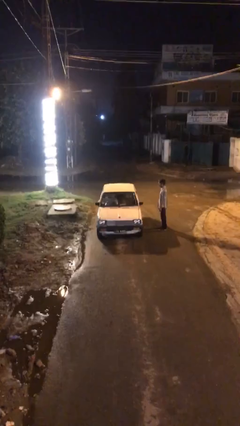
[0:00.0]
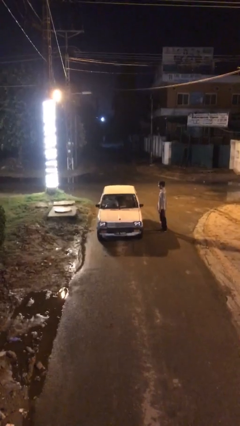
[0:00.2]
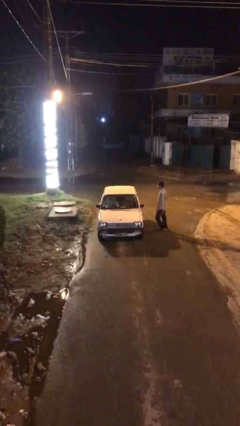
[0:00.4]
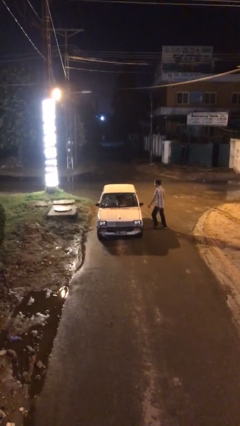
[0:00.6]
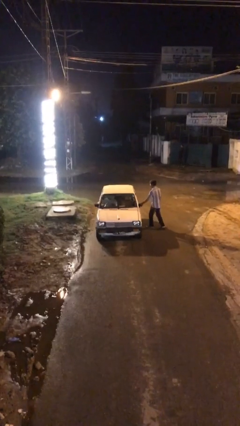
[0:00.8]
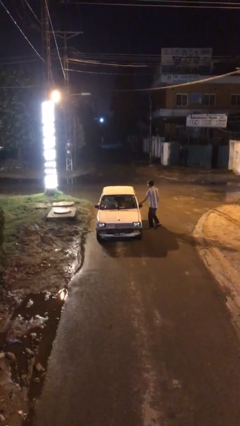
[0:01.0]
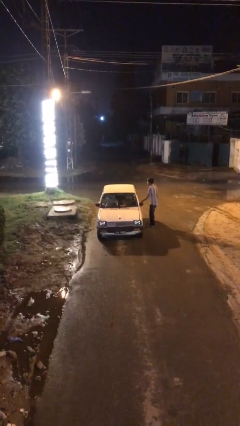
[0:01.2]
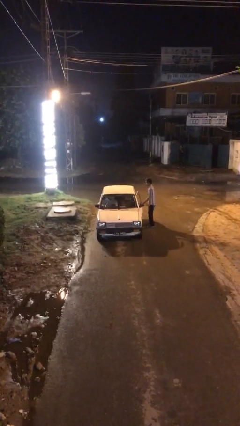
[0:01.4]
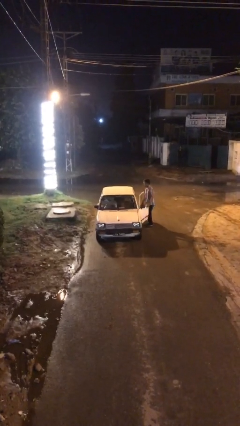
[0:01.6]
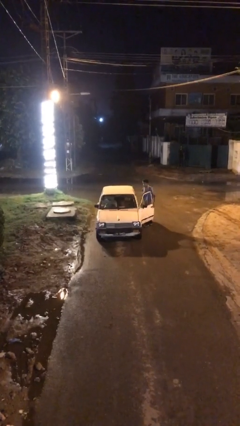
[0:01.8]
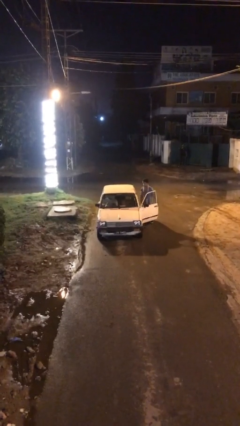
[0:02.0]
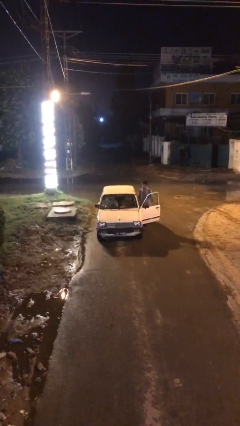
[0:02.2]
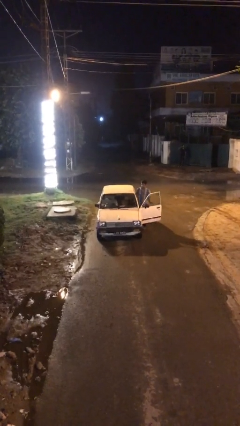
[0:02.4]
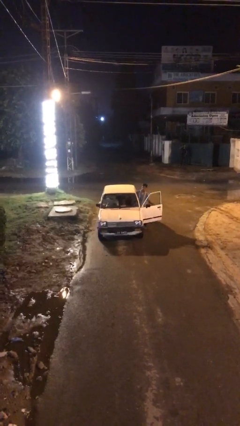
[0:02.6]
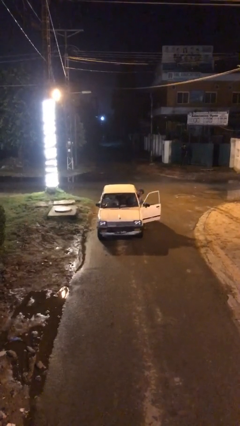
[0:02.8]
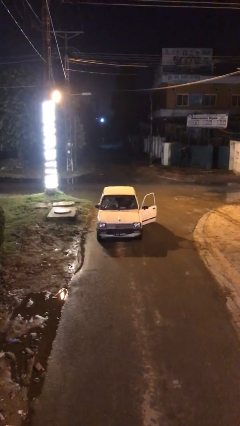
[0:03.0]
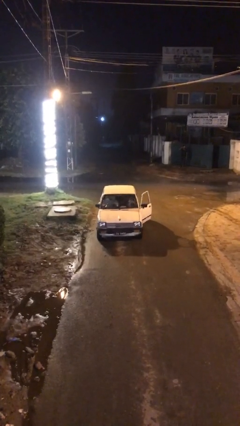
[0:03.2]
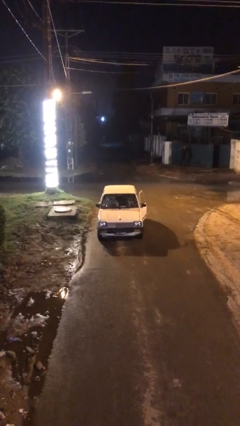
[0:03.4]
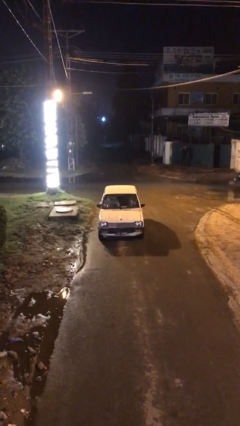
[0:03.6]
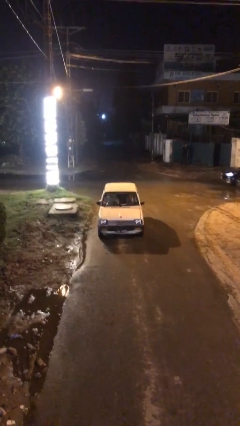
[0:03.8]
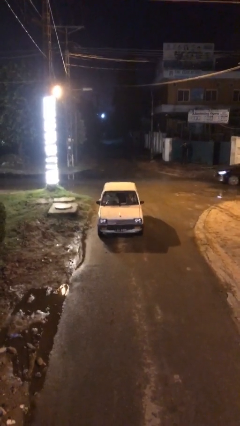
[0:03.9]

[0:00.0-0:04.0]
car picks up person

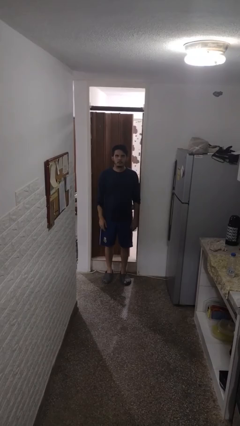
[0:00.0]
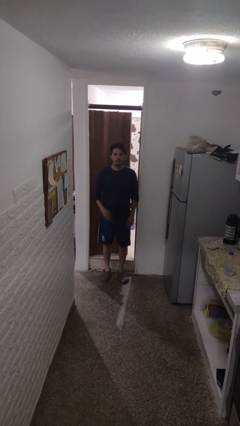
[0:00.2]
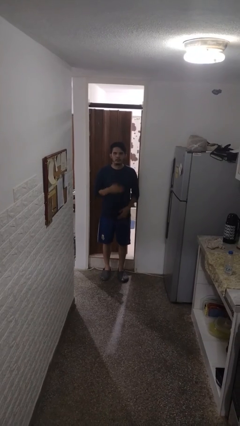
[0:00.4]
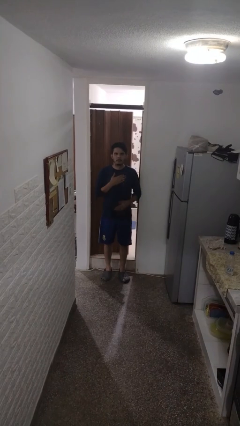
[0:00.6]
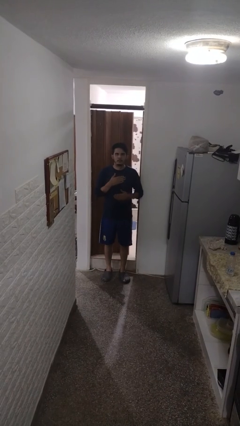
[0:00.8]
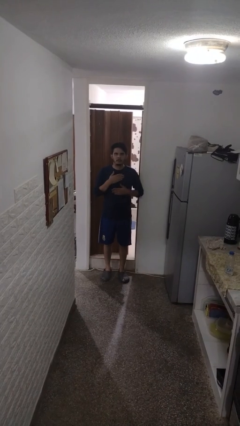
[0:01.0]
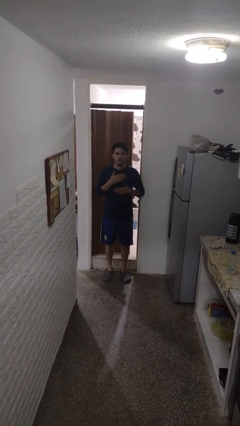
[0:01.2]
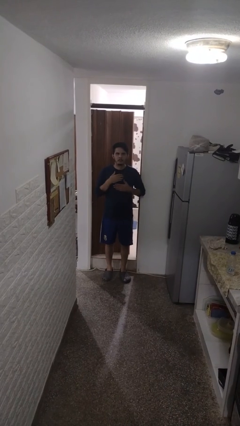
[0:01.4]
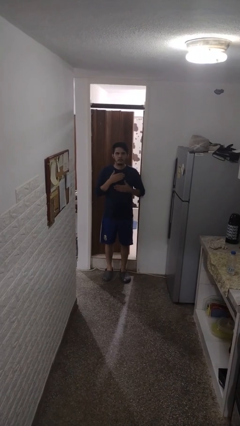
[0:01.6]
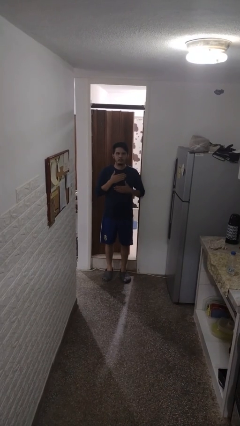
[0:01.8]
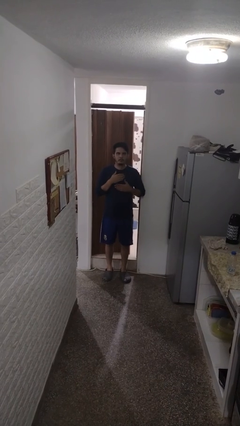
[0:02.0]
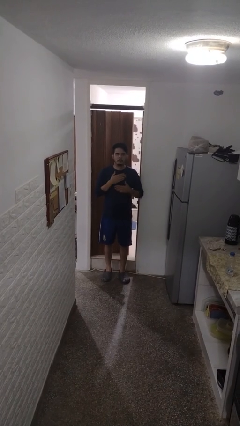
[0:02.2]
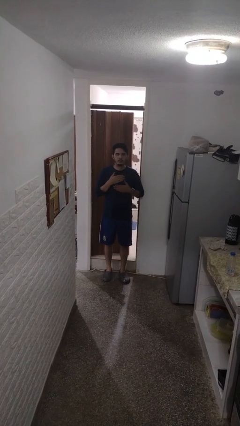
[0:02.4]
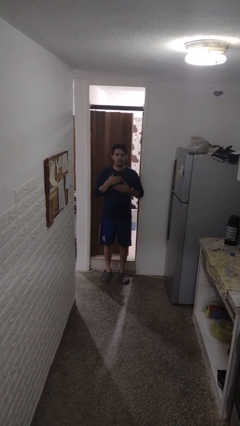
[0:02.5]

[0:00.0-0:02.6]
person drums on chest

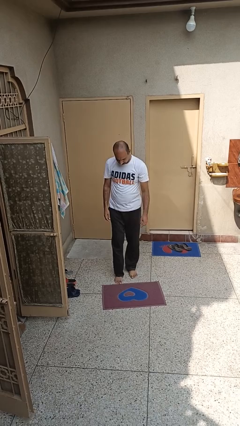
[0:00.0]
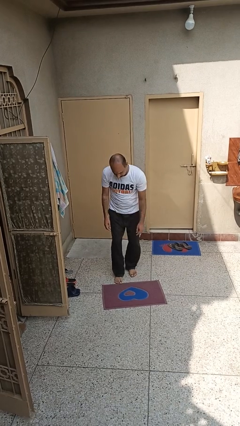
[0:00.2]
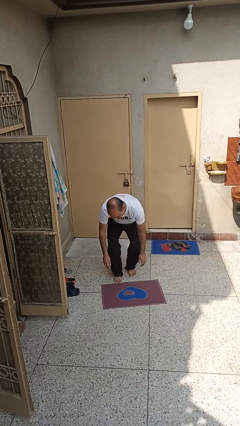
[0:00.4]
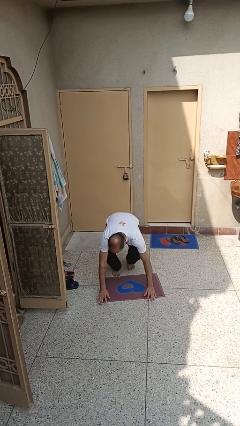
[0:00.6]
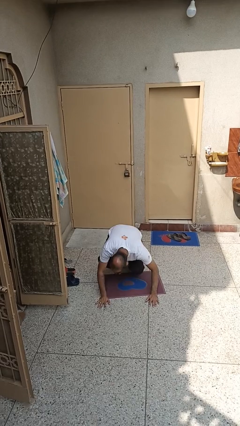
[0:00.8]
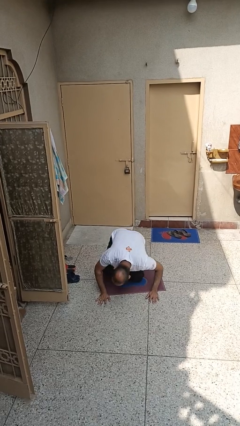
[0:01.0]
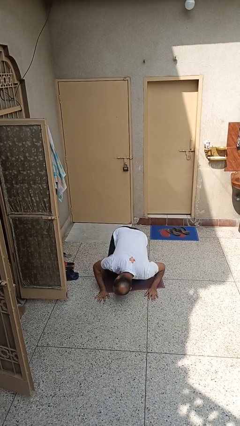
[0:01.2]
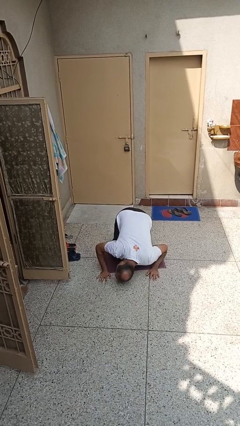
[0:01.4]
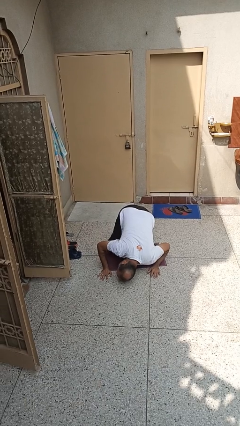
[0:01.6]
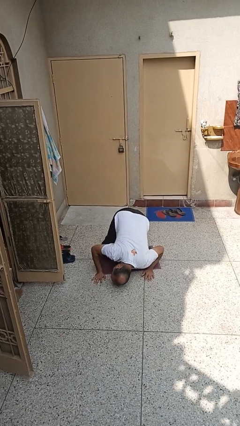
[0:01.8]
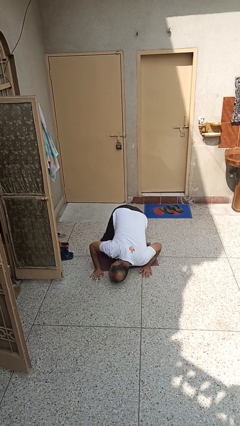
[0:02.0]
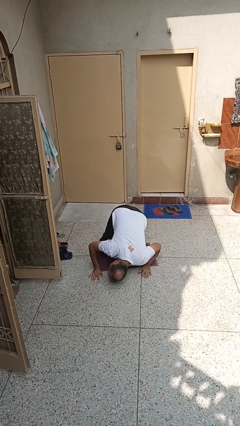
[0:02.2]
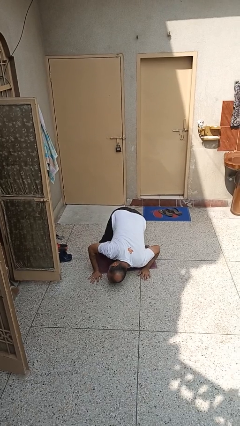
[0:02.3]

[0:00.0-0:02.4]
person trips on object on floor

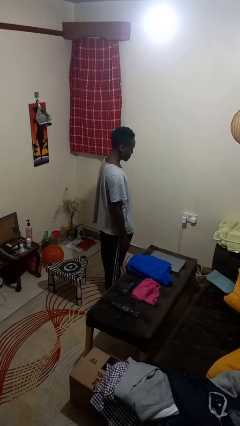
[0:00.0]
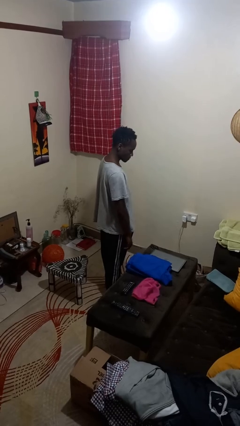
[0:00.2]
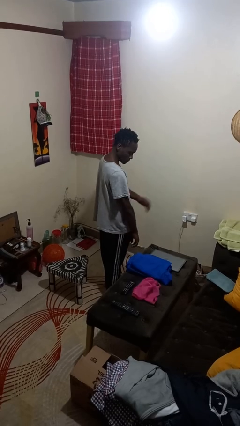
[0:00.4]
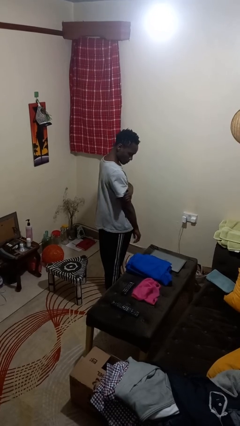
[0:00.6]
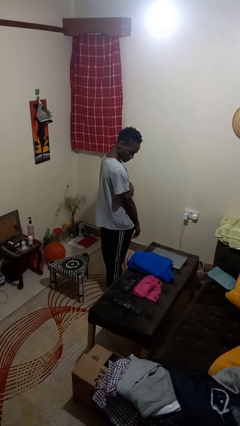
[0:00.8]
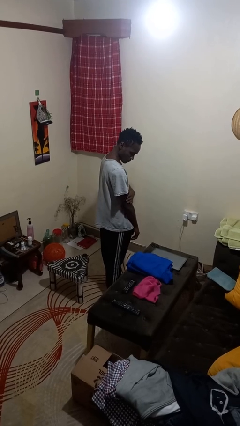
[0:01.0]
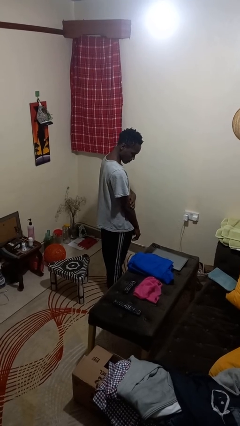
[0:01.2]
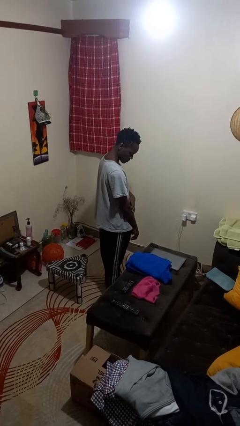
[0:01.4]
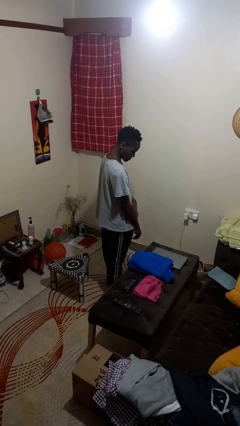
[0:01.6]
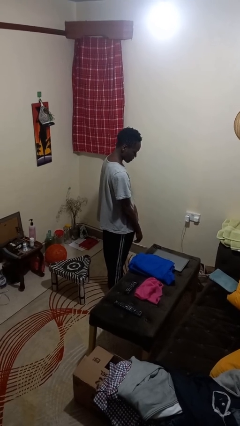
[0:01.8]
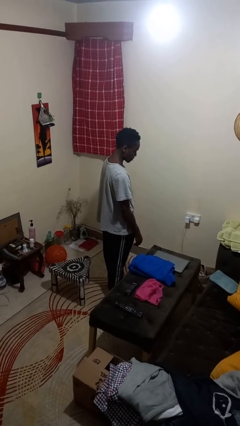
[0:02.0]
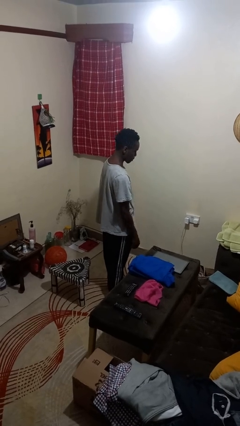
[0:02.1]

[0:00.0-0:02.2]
person swats bug

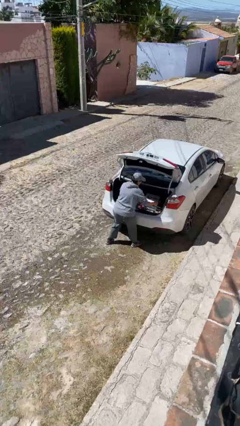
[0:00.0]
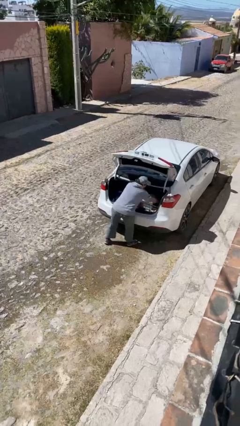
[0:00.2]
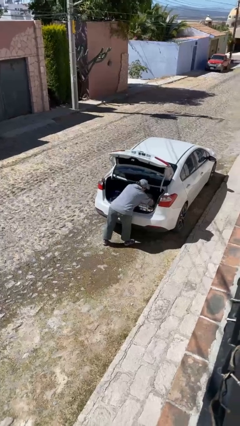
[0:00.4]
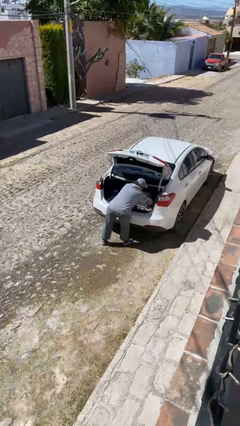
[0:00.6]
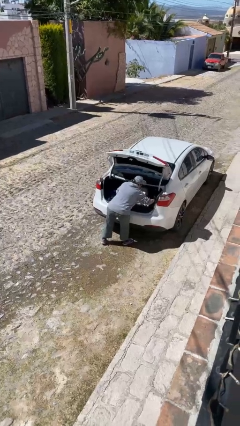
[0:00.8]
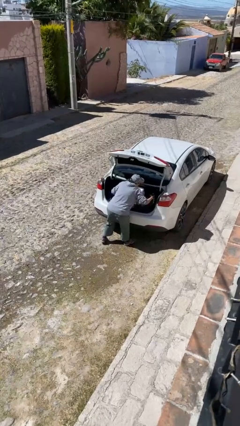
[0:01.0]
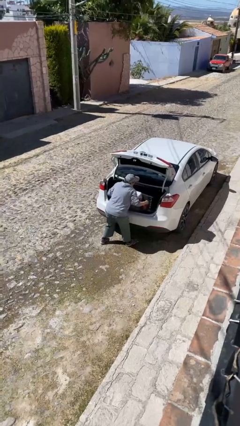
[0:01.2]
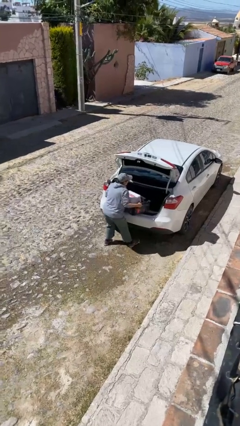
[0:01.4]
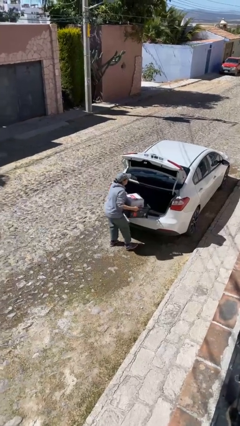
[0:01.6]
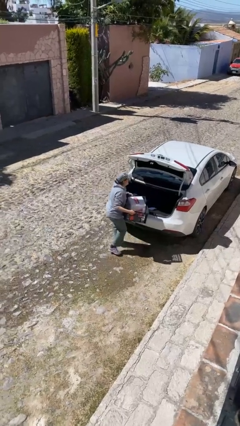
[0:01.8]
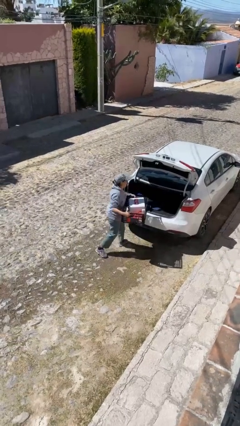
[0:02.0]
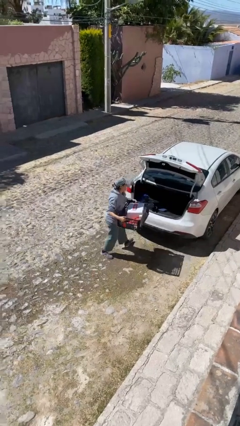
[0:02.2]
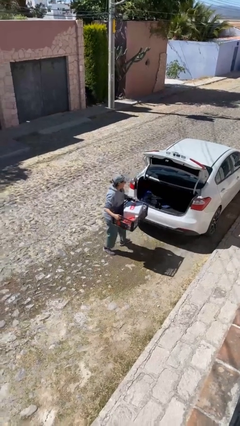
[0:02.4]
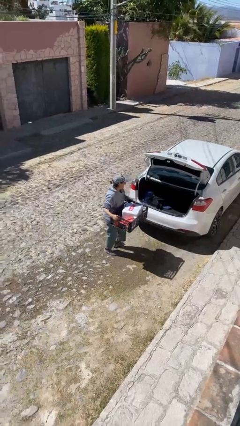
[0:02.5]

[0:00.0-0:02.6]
person unloads car

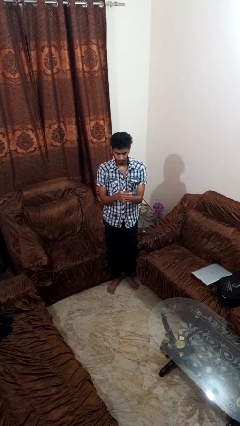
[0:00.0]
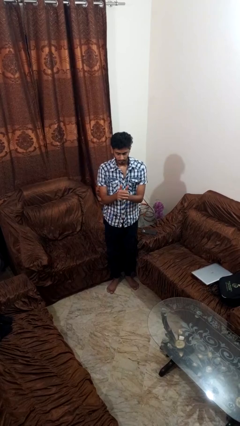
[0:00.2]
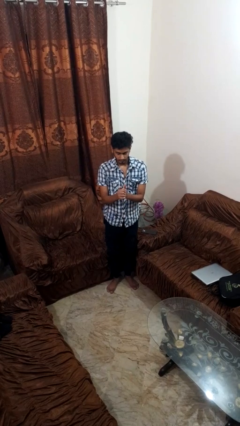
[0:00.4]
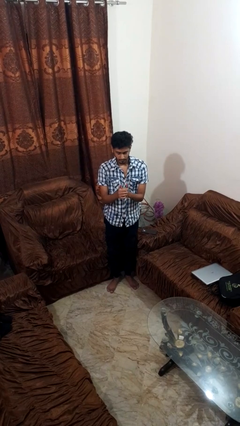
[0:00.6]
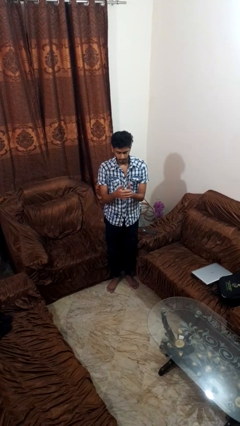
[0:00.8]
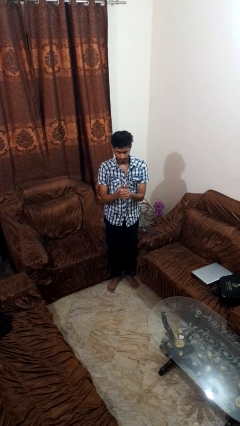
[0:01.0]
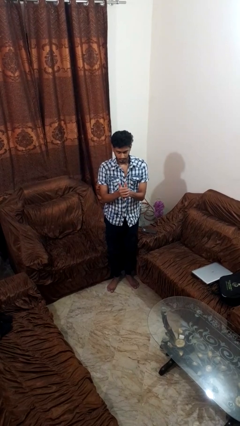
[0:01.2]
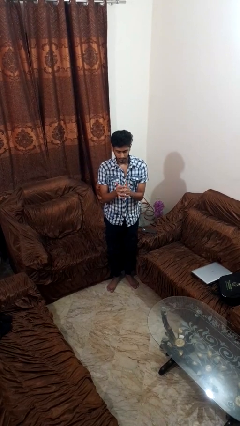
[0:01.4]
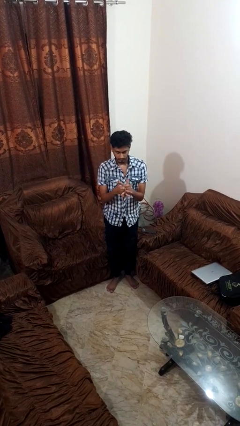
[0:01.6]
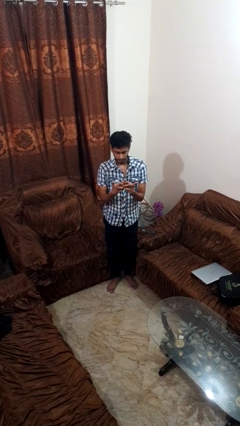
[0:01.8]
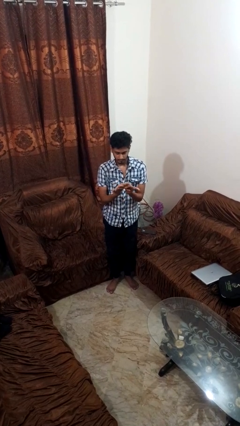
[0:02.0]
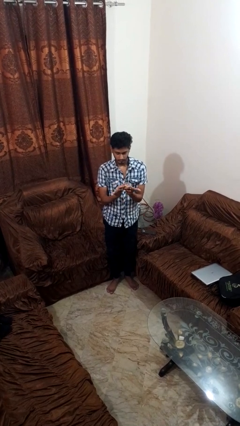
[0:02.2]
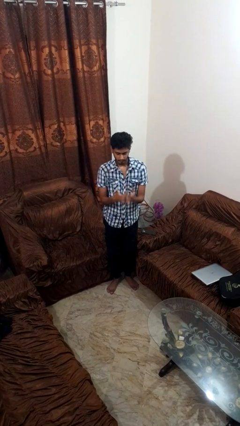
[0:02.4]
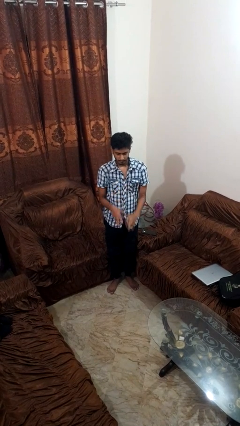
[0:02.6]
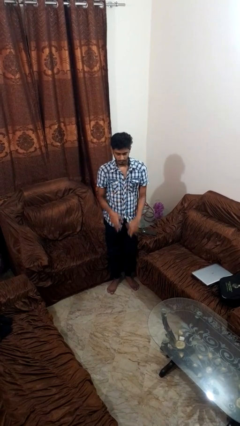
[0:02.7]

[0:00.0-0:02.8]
person cracks knuckles

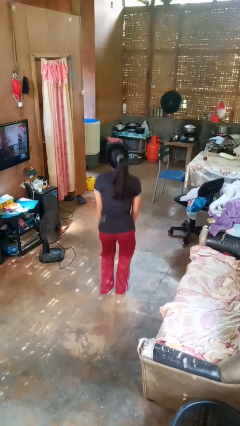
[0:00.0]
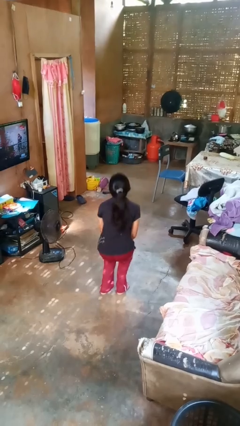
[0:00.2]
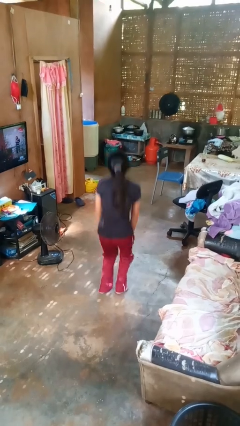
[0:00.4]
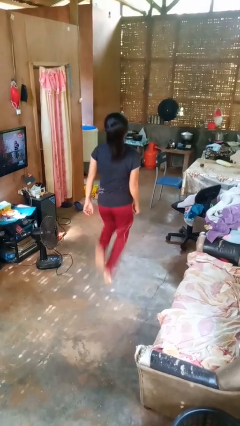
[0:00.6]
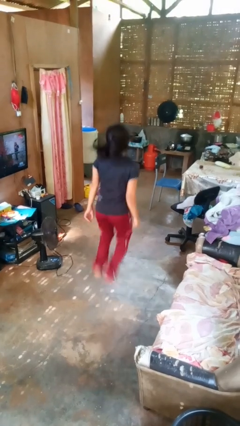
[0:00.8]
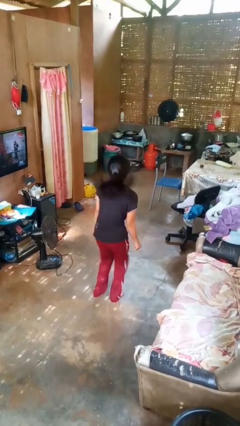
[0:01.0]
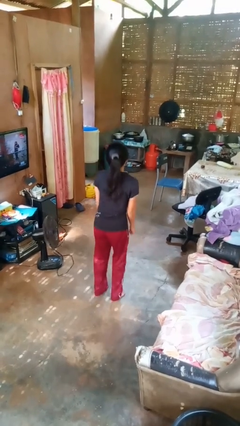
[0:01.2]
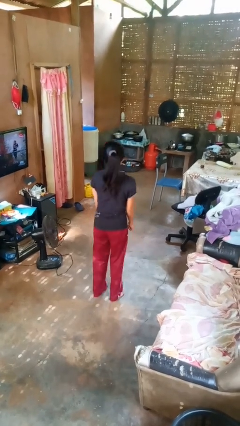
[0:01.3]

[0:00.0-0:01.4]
person jumps
